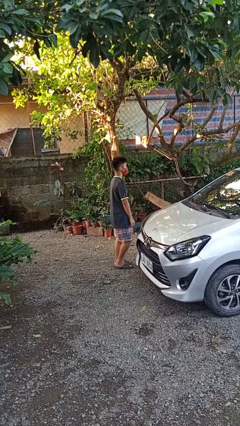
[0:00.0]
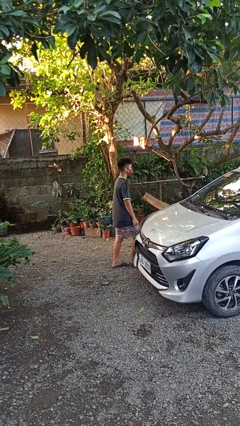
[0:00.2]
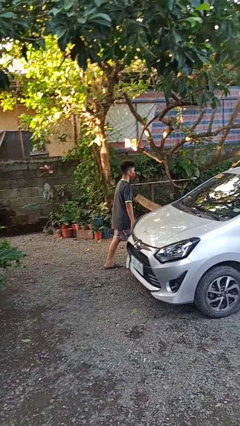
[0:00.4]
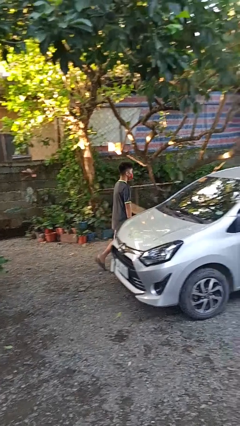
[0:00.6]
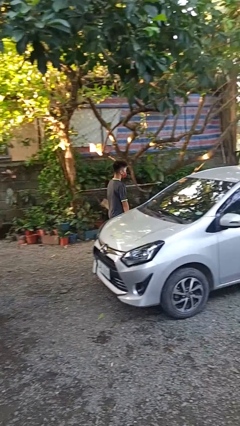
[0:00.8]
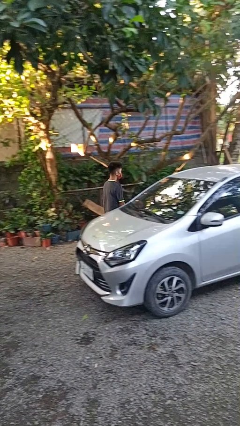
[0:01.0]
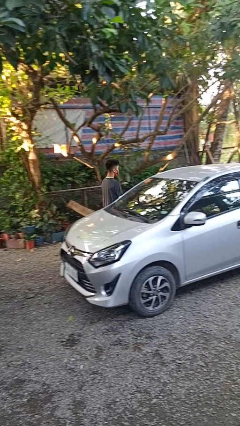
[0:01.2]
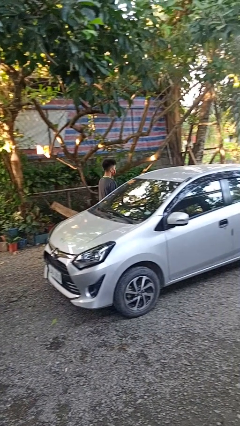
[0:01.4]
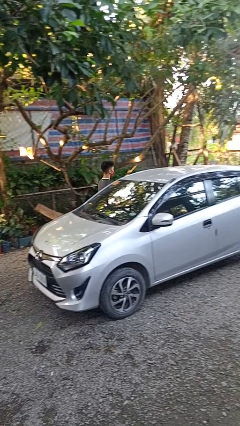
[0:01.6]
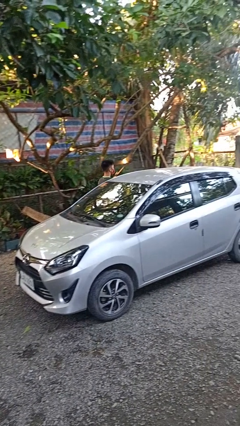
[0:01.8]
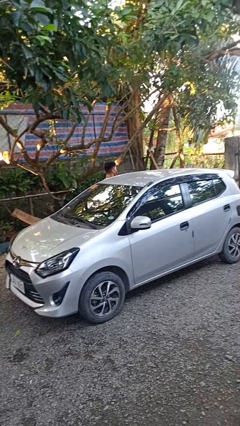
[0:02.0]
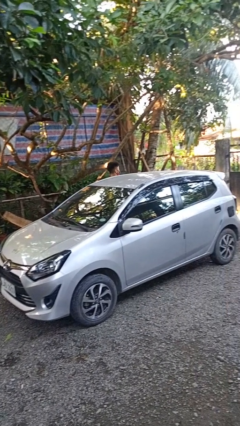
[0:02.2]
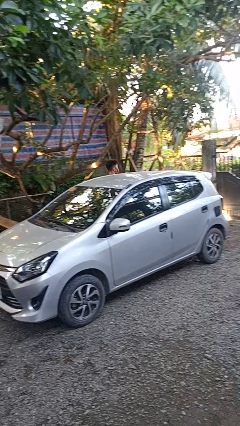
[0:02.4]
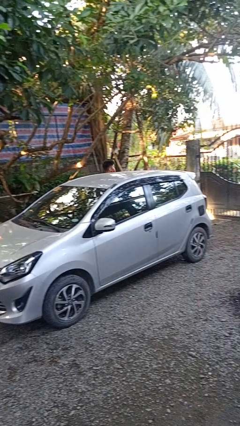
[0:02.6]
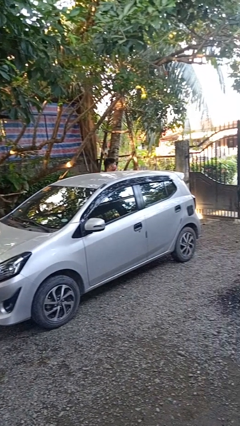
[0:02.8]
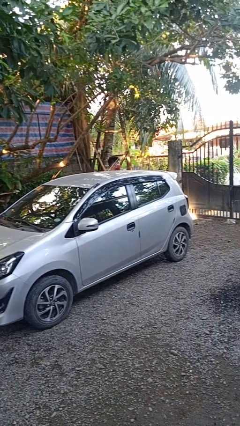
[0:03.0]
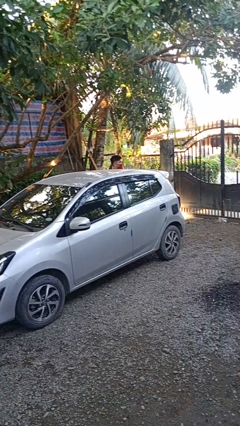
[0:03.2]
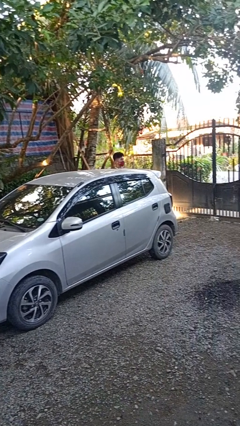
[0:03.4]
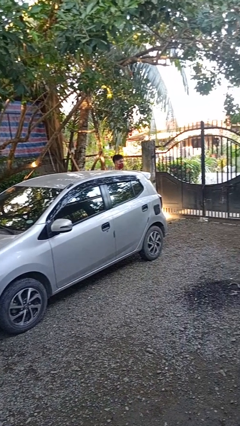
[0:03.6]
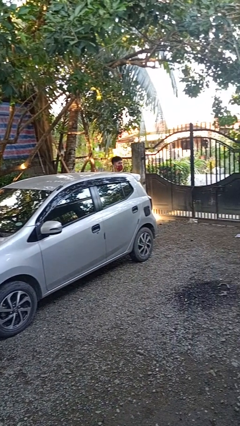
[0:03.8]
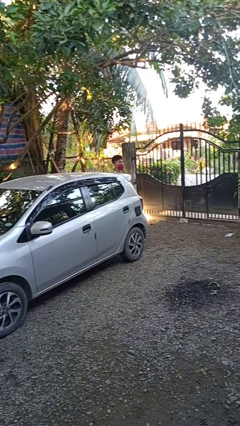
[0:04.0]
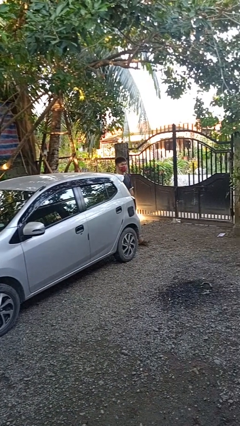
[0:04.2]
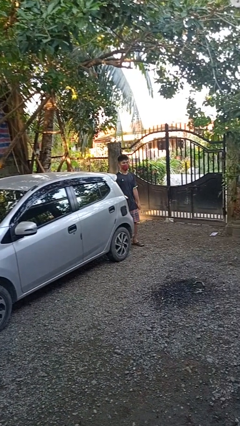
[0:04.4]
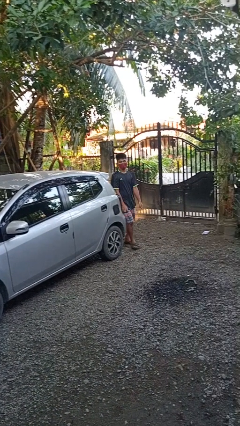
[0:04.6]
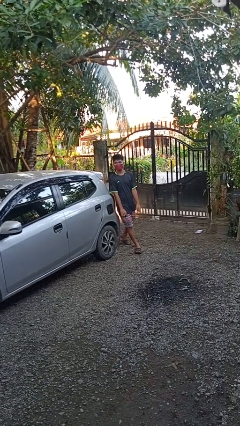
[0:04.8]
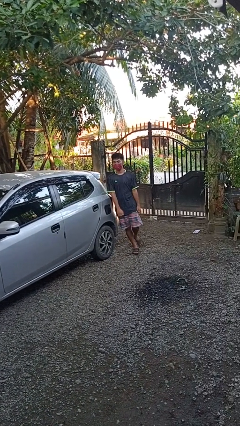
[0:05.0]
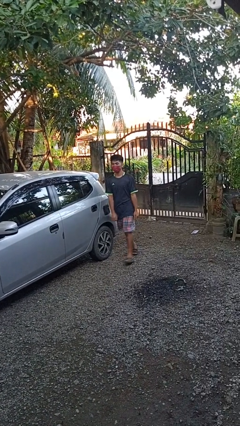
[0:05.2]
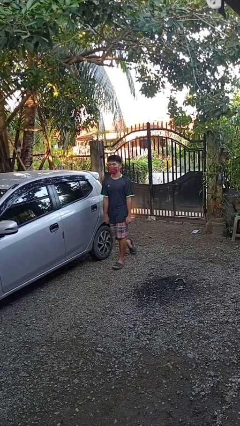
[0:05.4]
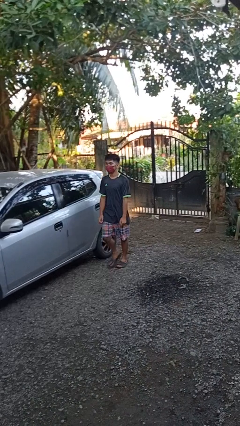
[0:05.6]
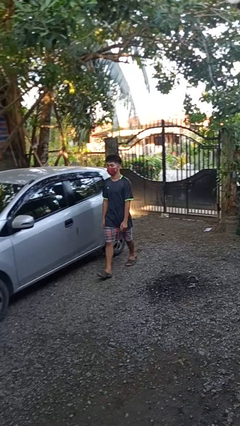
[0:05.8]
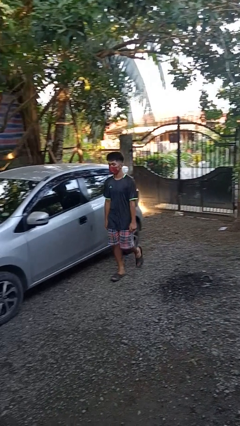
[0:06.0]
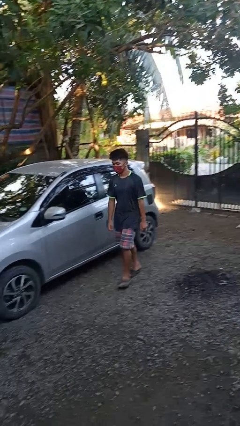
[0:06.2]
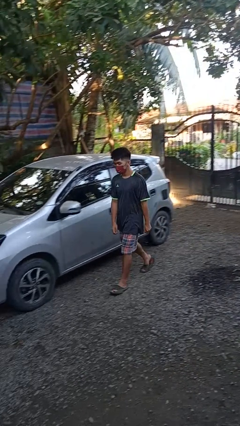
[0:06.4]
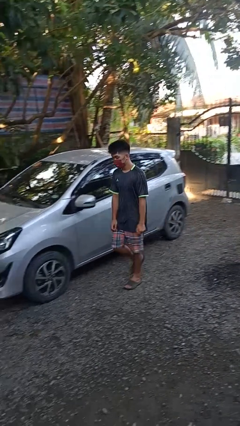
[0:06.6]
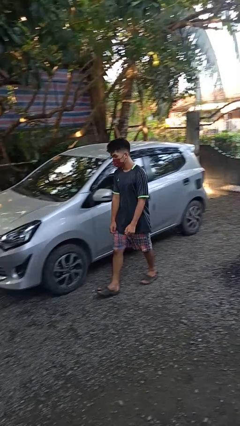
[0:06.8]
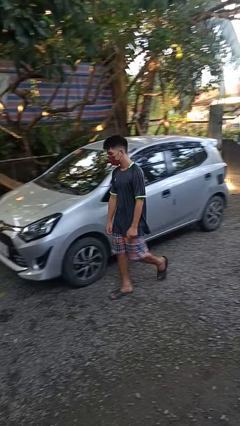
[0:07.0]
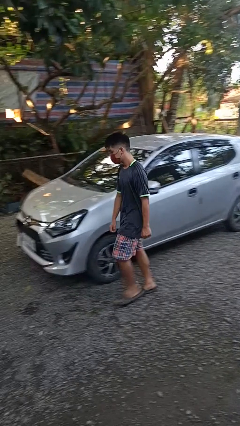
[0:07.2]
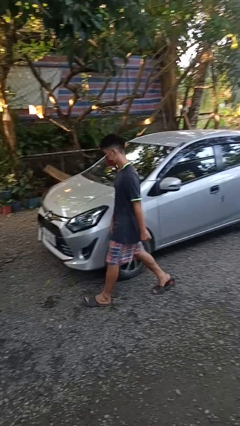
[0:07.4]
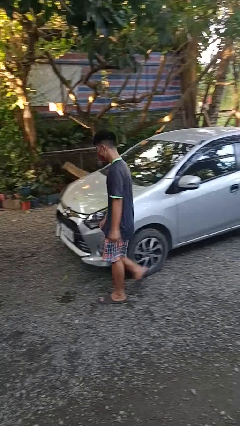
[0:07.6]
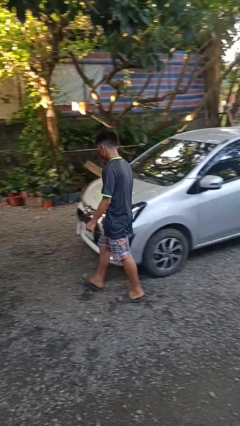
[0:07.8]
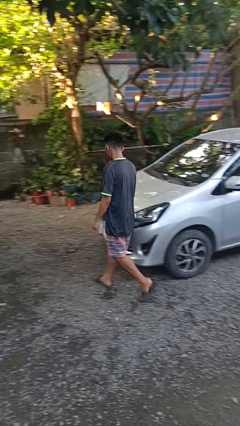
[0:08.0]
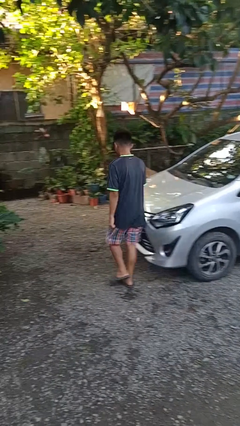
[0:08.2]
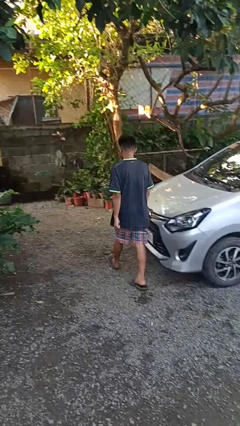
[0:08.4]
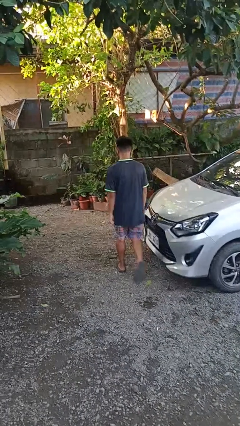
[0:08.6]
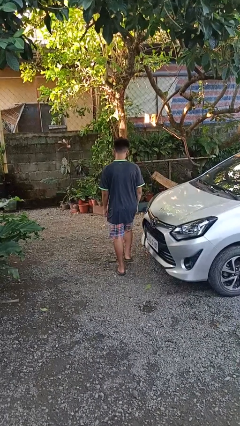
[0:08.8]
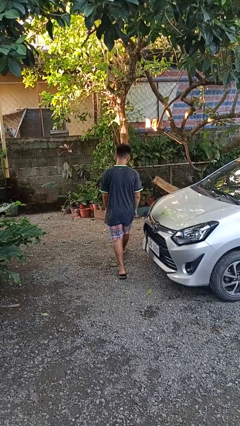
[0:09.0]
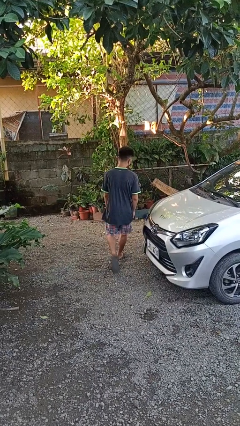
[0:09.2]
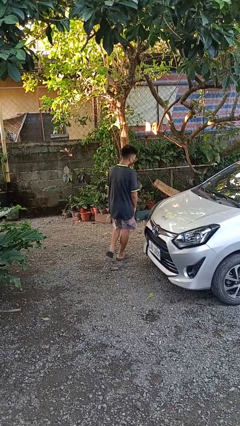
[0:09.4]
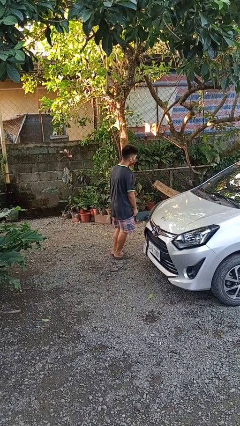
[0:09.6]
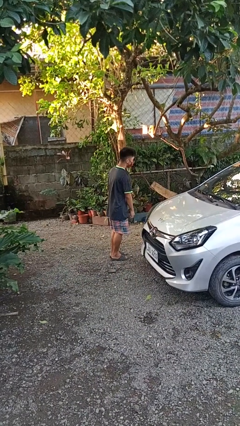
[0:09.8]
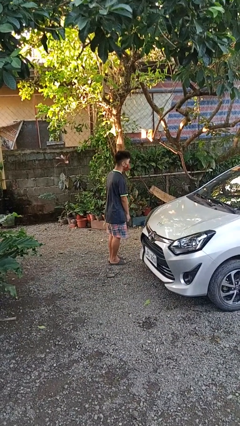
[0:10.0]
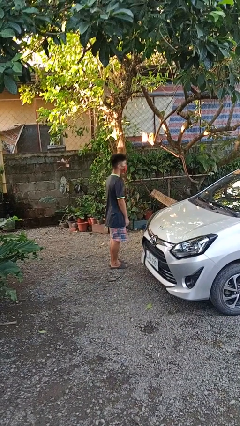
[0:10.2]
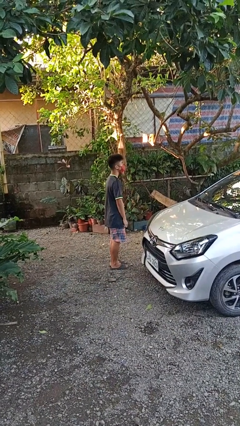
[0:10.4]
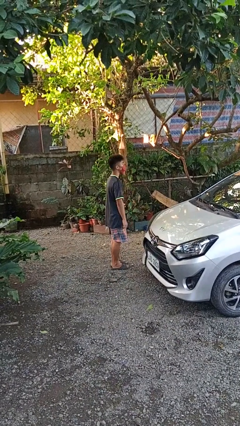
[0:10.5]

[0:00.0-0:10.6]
person walks around car

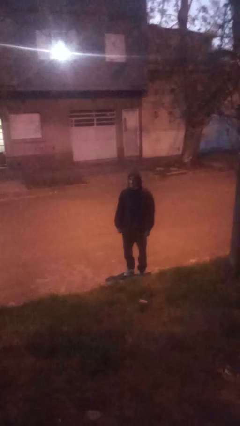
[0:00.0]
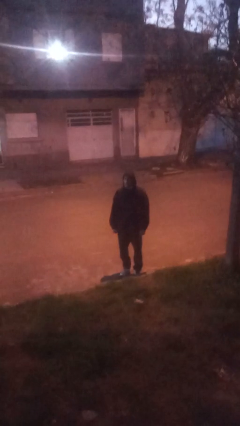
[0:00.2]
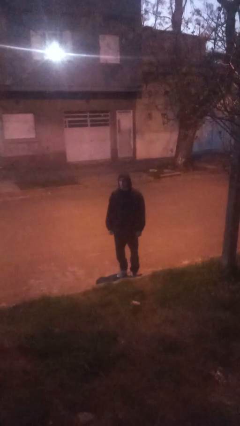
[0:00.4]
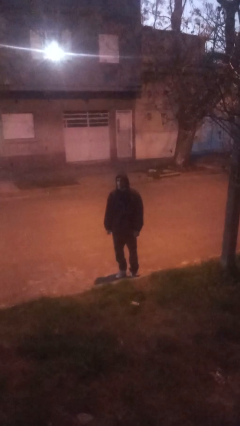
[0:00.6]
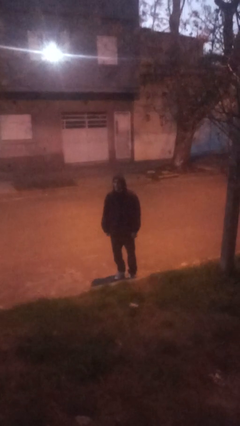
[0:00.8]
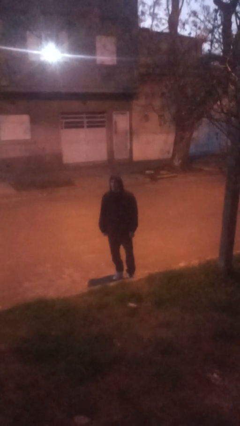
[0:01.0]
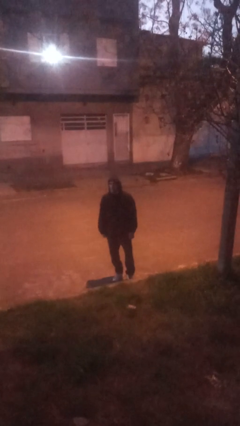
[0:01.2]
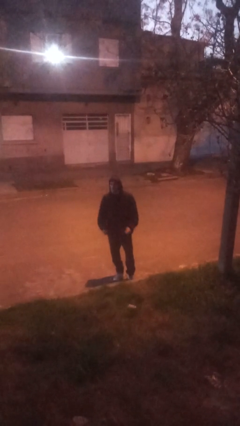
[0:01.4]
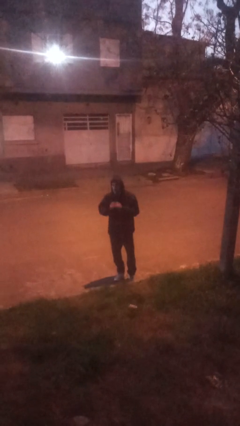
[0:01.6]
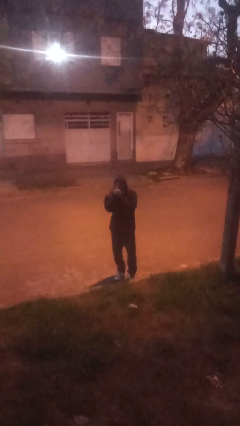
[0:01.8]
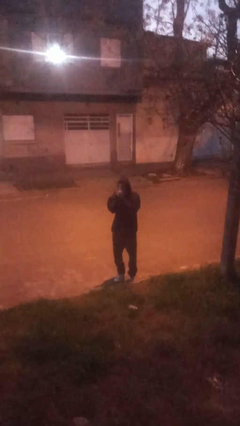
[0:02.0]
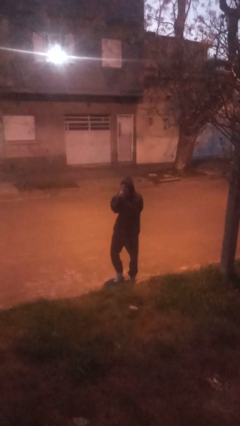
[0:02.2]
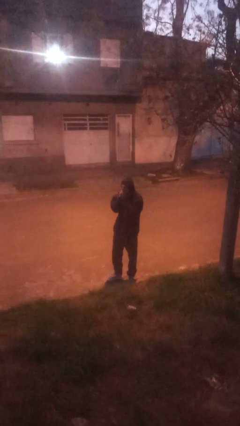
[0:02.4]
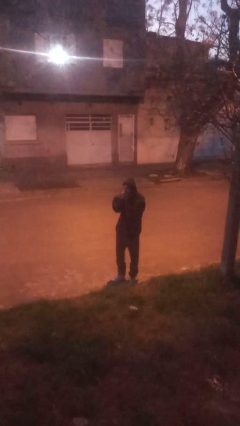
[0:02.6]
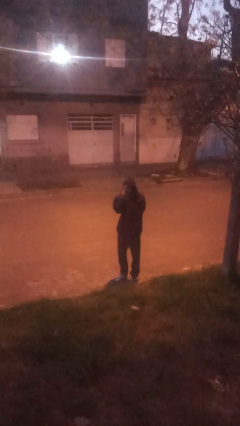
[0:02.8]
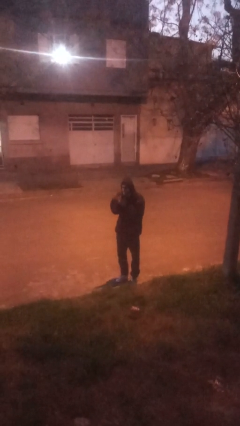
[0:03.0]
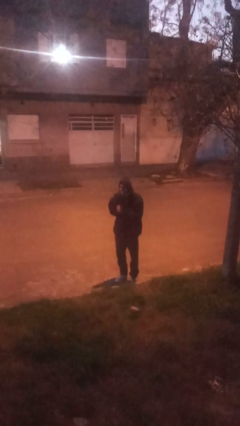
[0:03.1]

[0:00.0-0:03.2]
person blows into hands

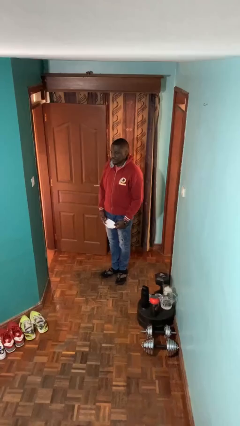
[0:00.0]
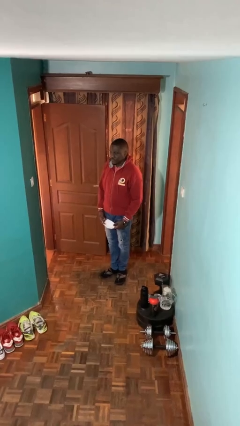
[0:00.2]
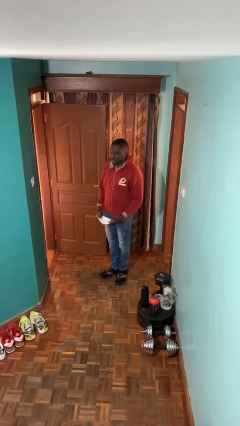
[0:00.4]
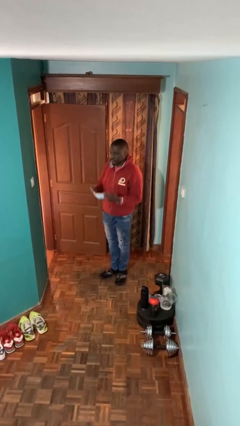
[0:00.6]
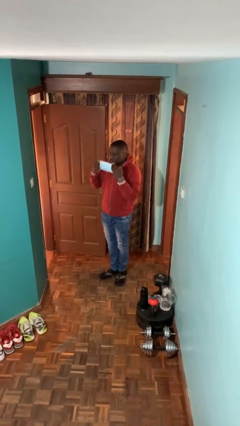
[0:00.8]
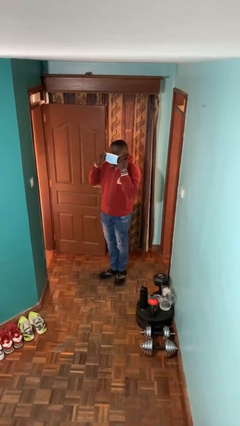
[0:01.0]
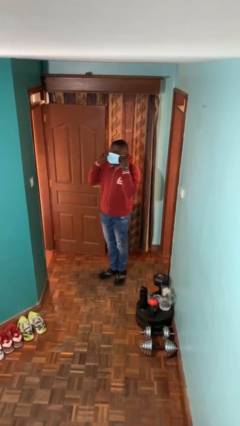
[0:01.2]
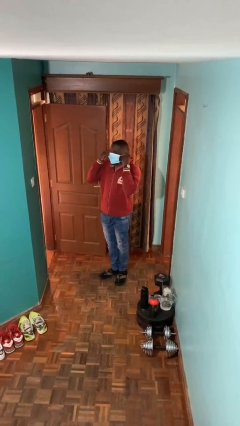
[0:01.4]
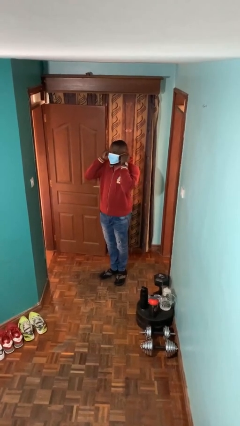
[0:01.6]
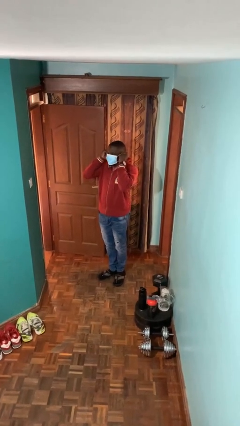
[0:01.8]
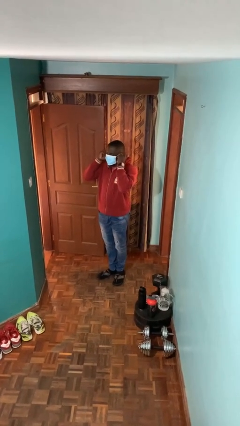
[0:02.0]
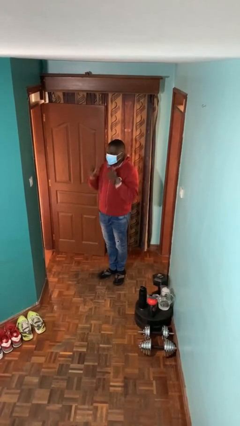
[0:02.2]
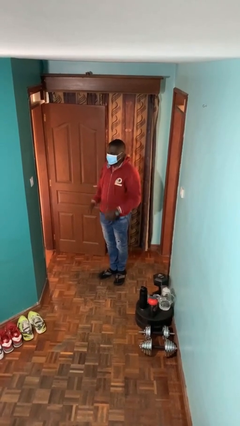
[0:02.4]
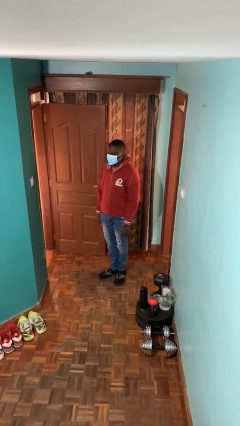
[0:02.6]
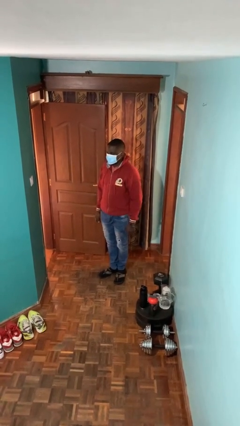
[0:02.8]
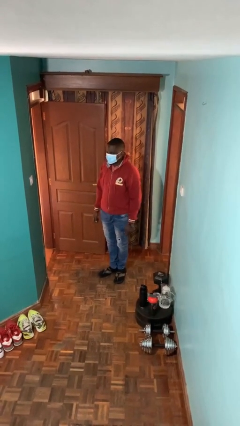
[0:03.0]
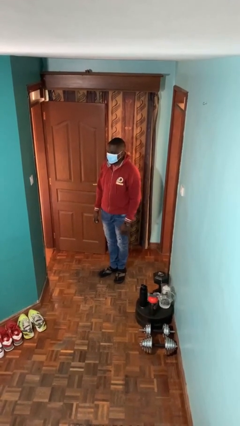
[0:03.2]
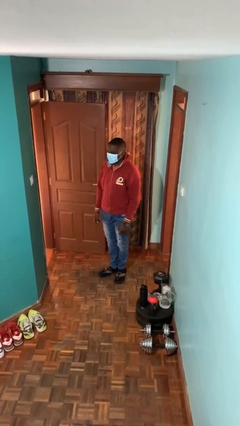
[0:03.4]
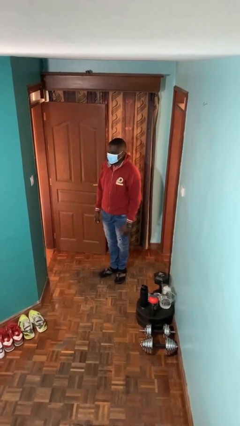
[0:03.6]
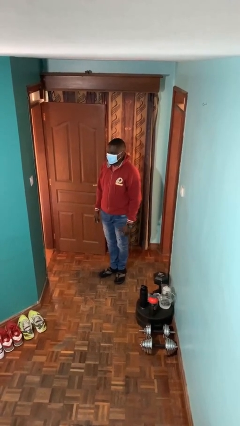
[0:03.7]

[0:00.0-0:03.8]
person puts on facemask

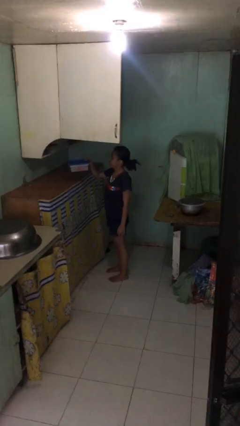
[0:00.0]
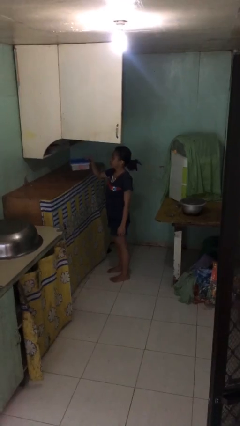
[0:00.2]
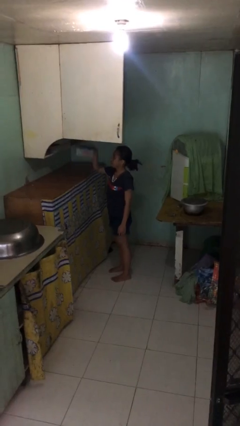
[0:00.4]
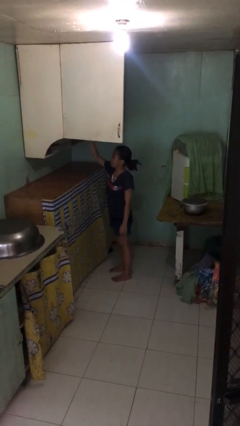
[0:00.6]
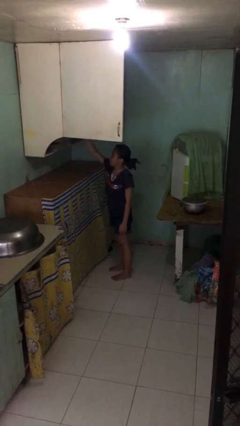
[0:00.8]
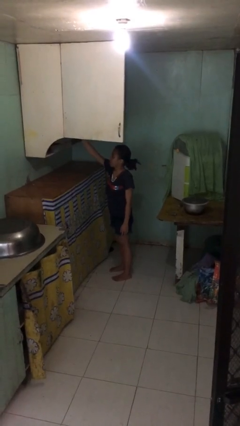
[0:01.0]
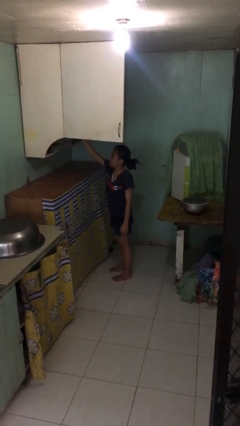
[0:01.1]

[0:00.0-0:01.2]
person puts down object on shelf
